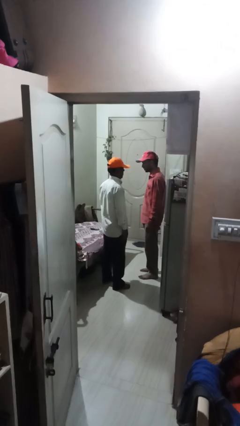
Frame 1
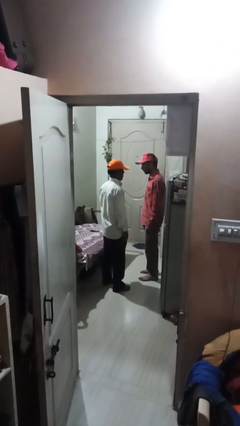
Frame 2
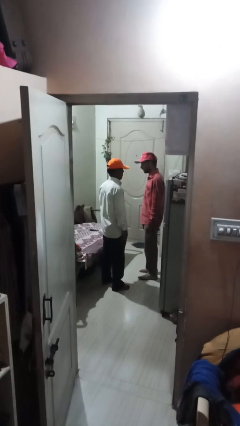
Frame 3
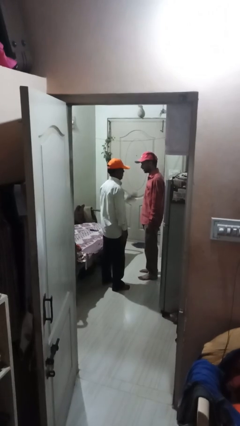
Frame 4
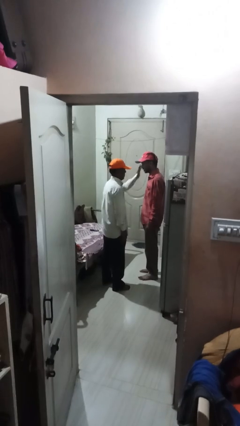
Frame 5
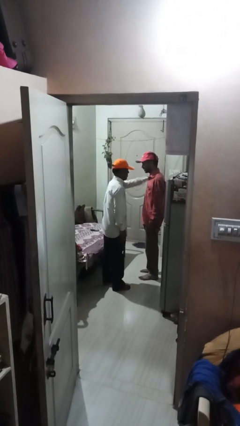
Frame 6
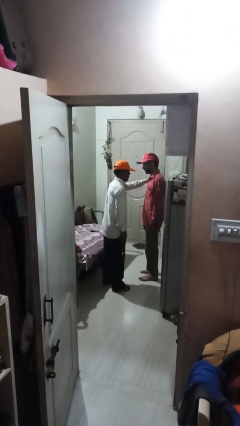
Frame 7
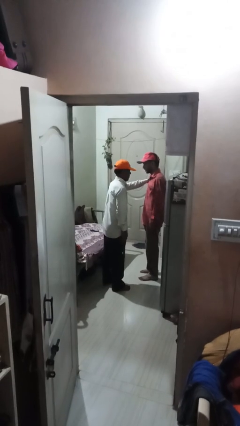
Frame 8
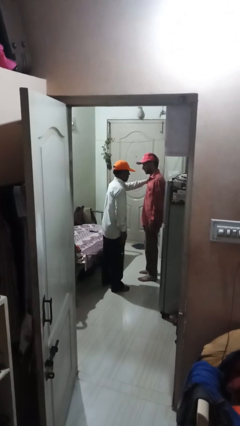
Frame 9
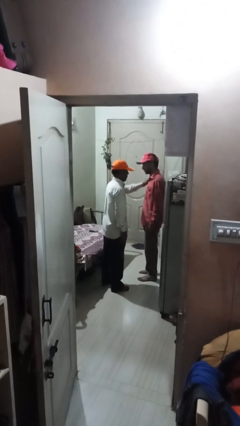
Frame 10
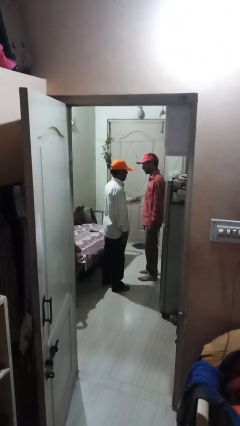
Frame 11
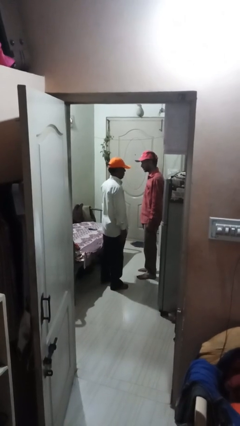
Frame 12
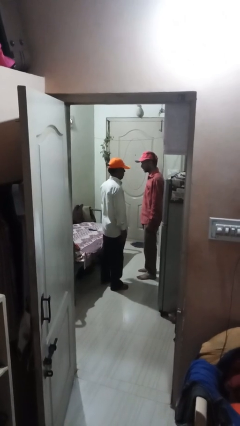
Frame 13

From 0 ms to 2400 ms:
person pounds shoulders of person

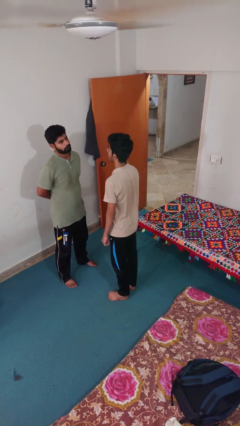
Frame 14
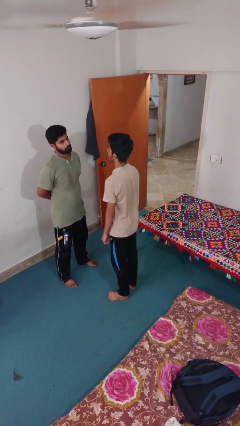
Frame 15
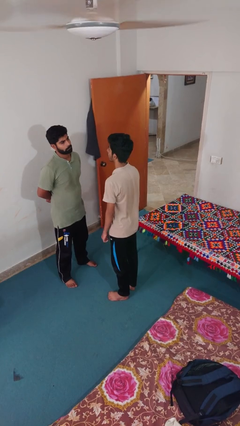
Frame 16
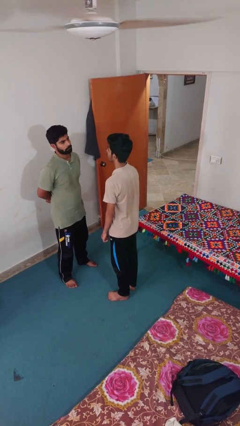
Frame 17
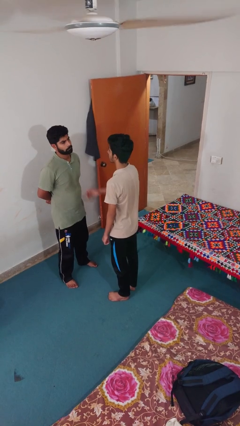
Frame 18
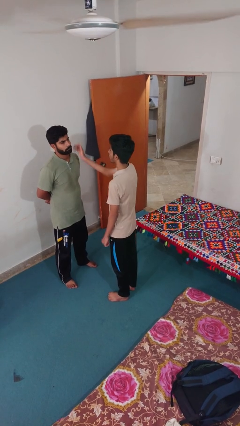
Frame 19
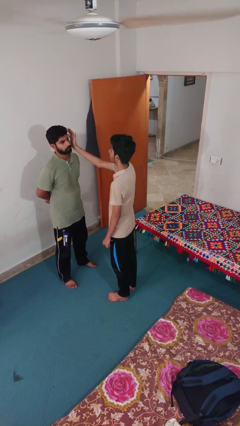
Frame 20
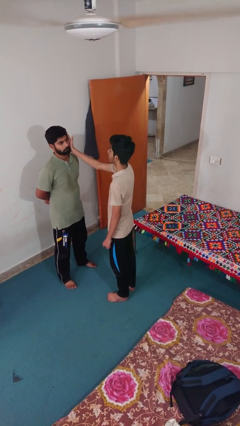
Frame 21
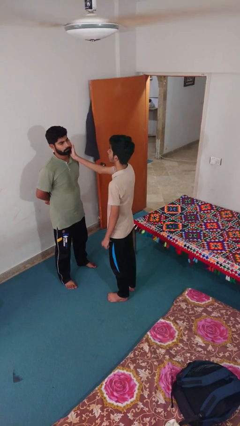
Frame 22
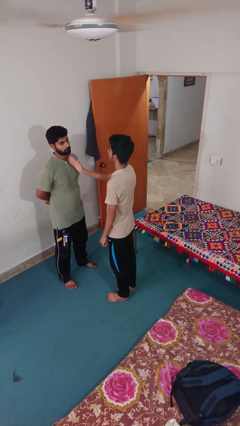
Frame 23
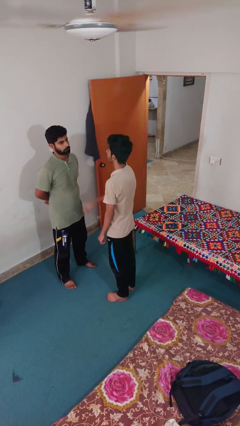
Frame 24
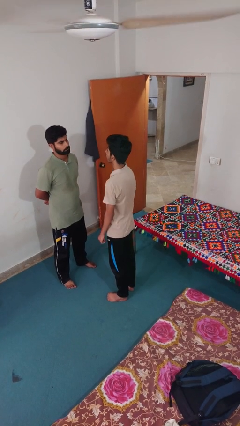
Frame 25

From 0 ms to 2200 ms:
person touches face of person

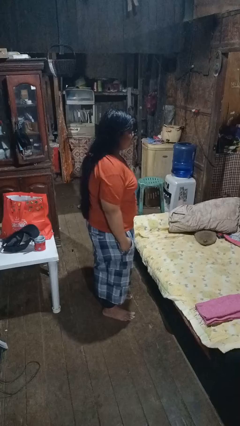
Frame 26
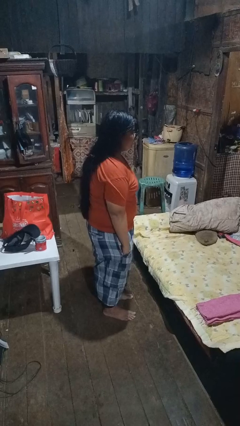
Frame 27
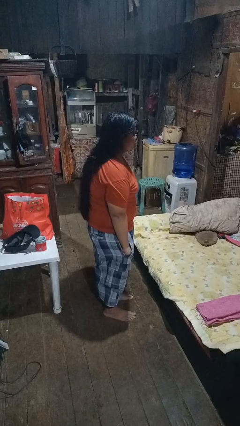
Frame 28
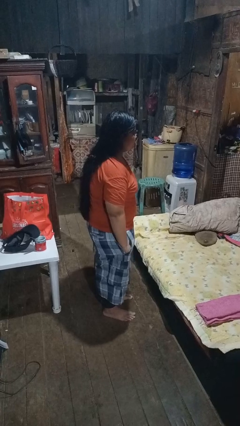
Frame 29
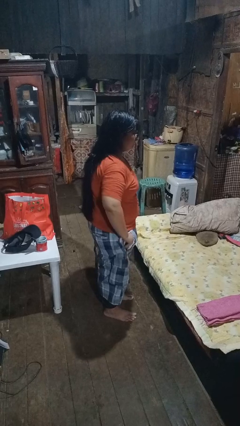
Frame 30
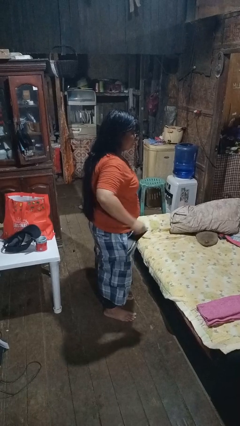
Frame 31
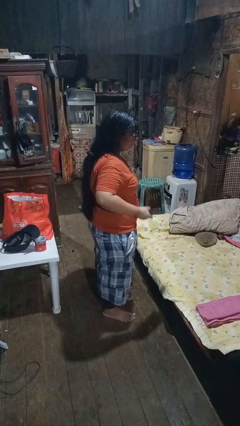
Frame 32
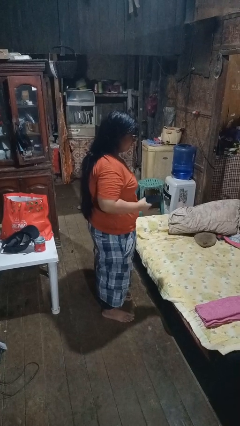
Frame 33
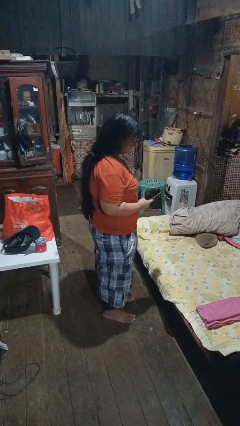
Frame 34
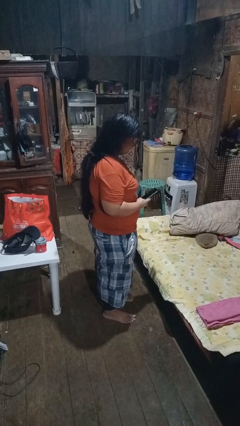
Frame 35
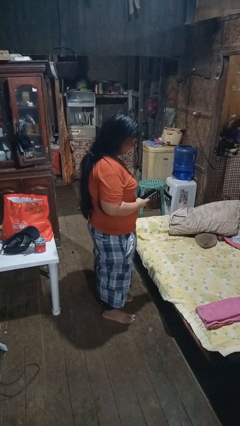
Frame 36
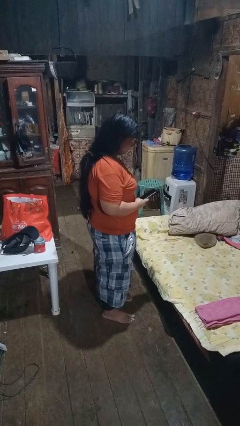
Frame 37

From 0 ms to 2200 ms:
person takes phone from pocket

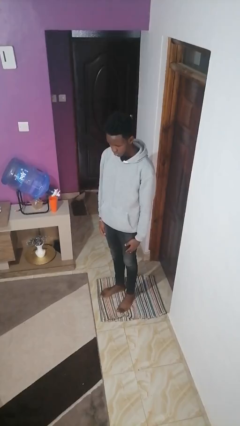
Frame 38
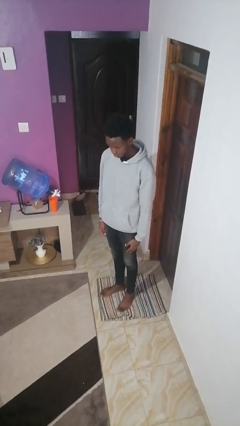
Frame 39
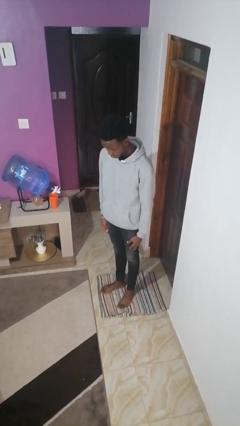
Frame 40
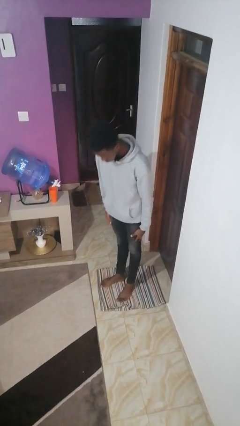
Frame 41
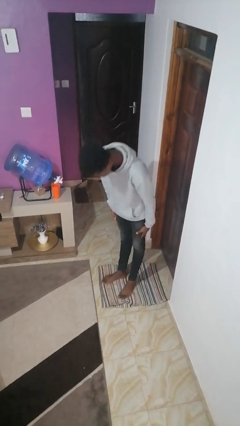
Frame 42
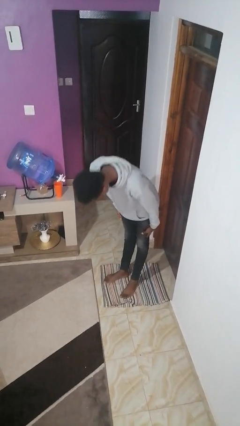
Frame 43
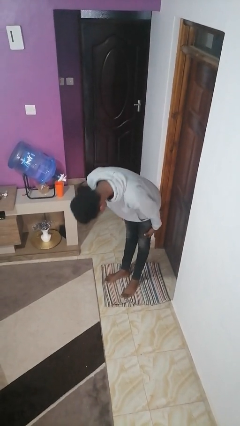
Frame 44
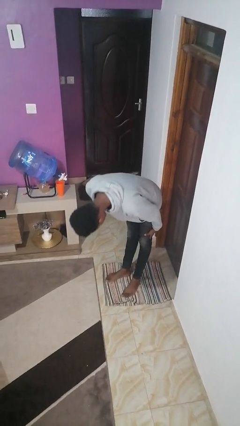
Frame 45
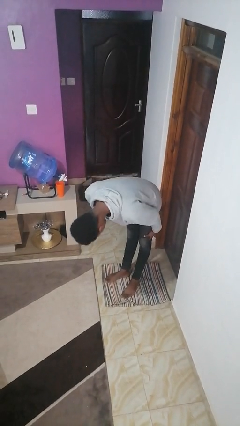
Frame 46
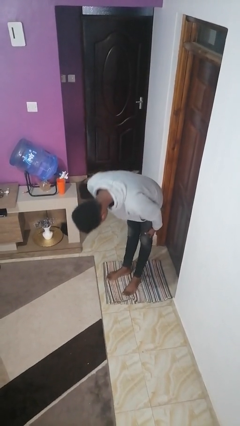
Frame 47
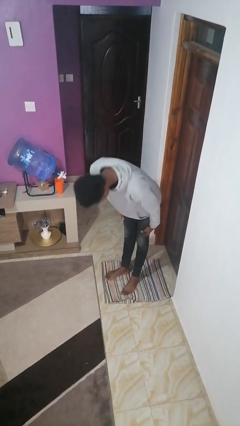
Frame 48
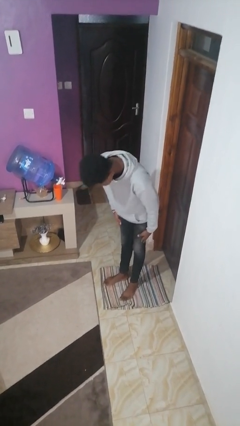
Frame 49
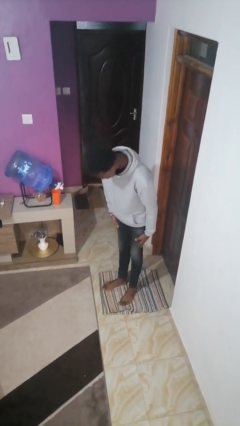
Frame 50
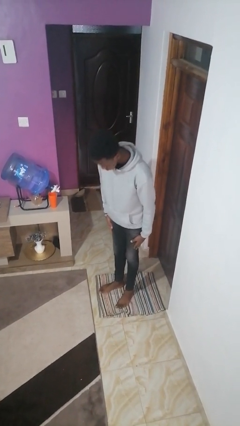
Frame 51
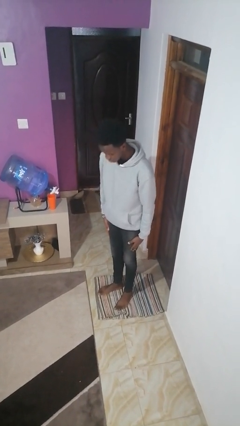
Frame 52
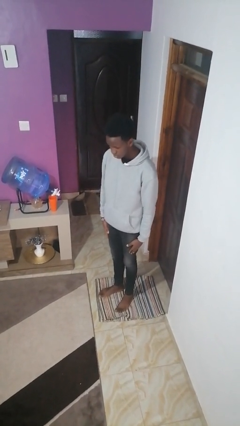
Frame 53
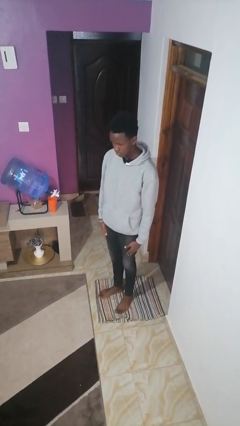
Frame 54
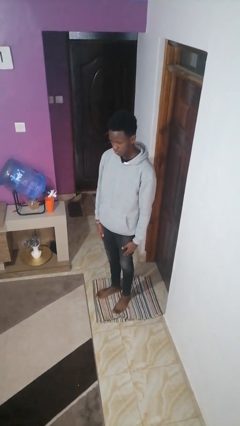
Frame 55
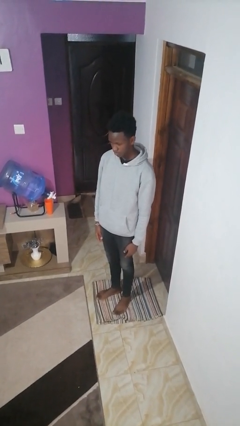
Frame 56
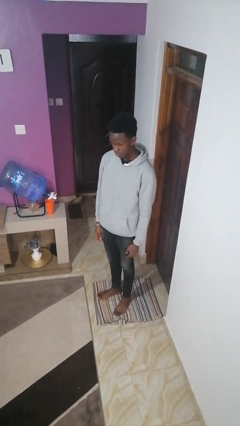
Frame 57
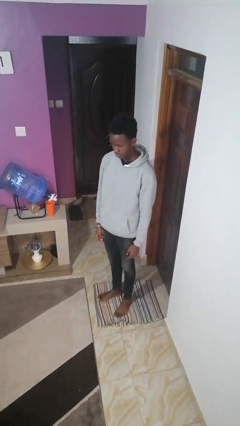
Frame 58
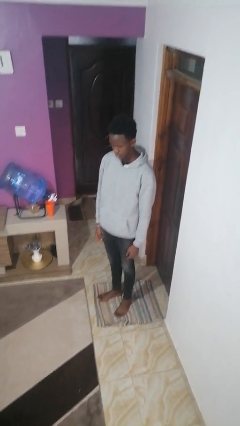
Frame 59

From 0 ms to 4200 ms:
person bows

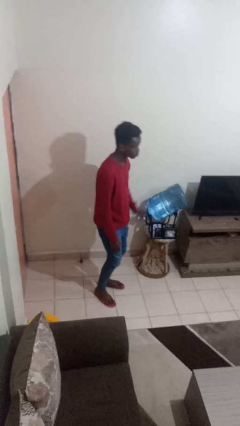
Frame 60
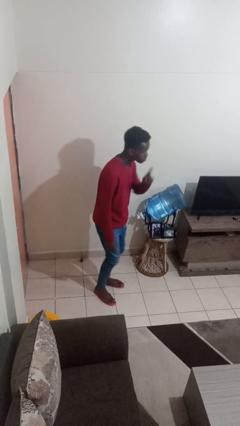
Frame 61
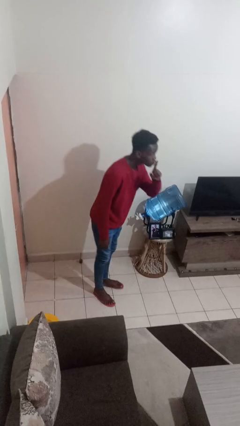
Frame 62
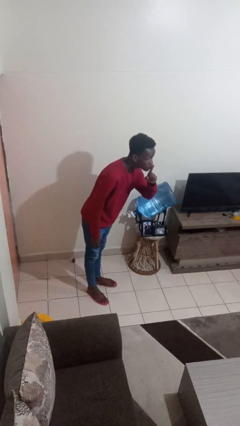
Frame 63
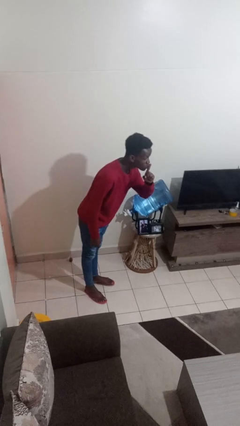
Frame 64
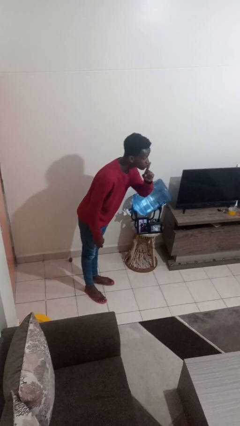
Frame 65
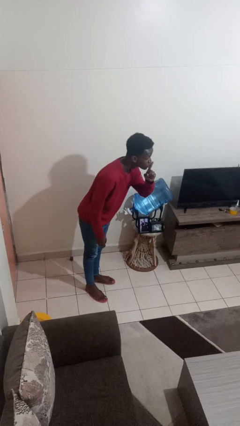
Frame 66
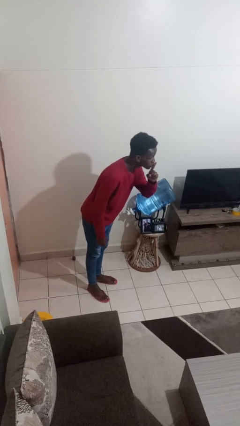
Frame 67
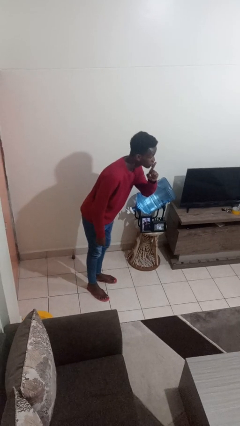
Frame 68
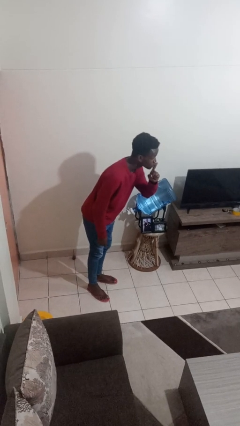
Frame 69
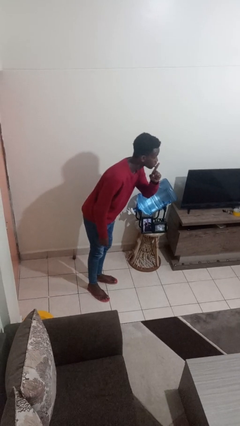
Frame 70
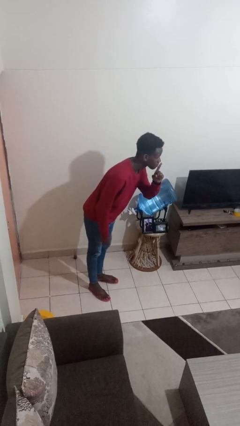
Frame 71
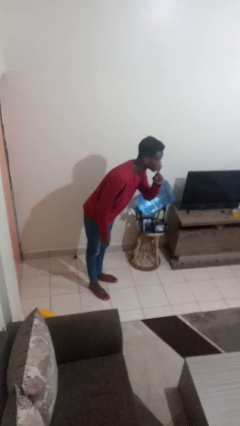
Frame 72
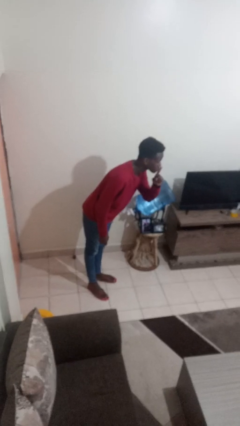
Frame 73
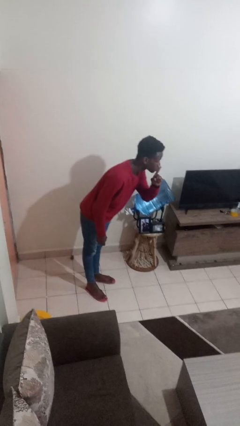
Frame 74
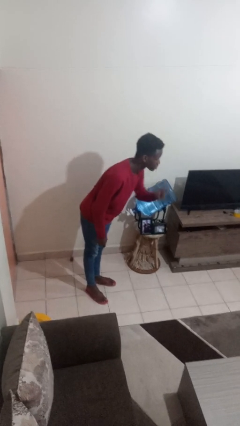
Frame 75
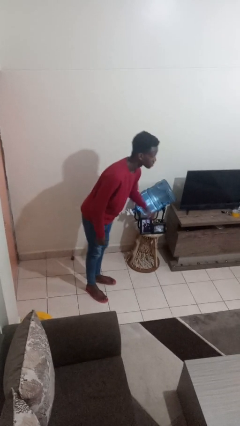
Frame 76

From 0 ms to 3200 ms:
person gestures be quiet

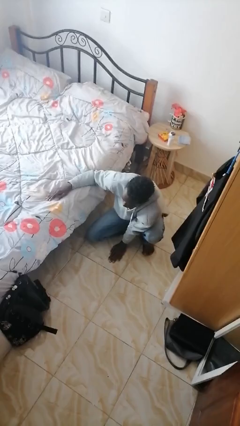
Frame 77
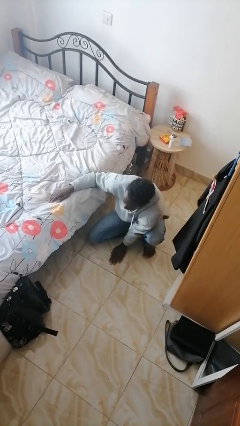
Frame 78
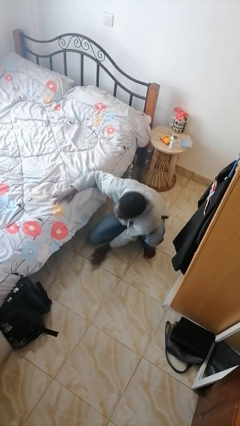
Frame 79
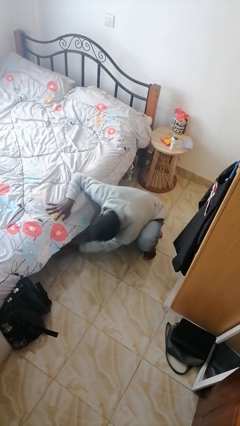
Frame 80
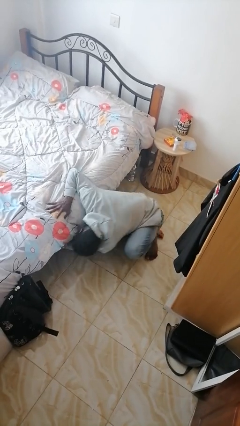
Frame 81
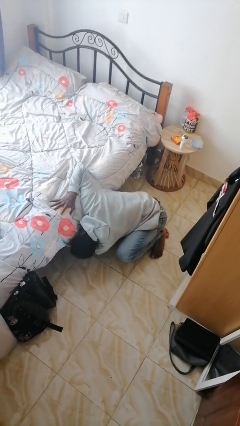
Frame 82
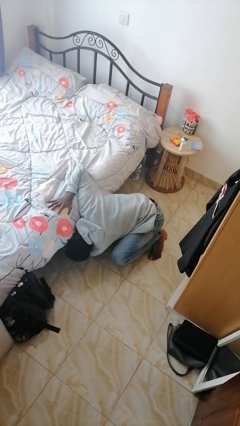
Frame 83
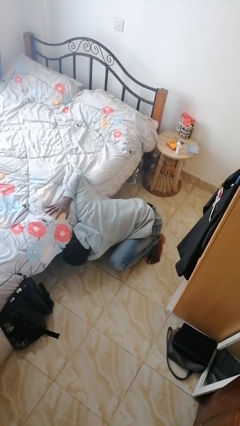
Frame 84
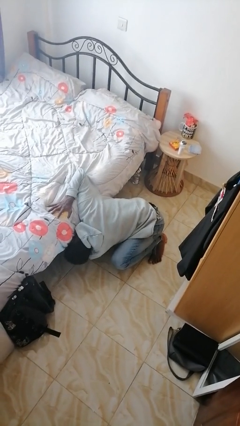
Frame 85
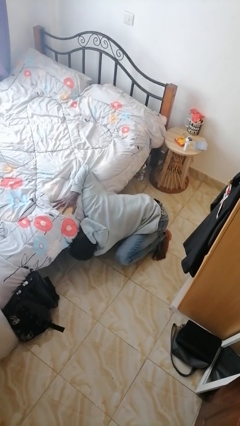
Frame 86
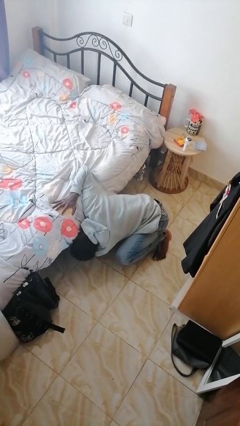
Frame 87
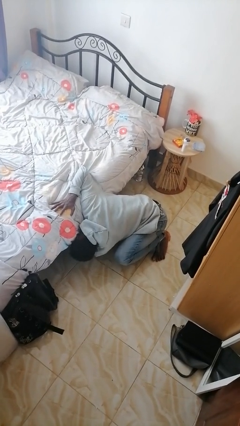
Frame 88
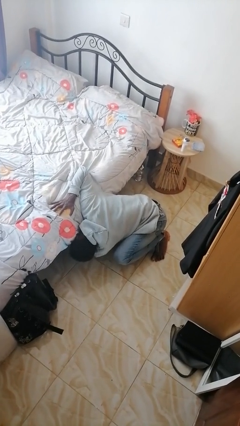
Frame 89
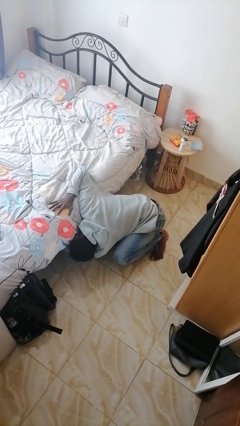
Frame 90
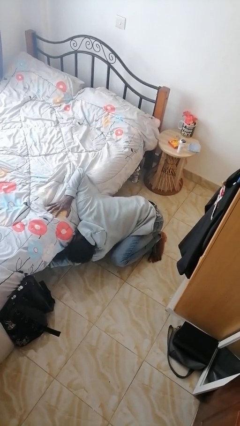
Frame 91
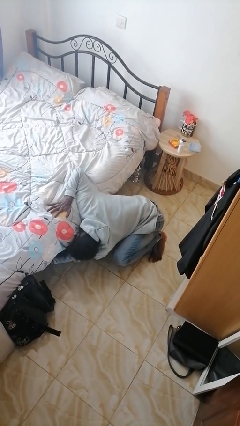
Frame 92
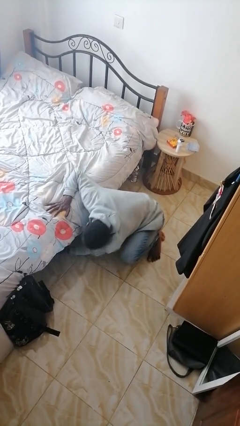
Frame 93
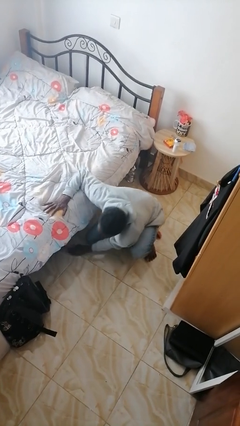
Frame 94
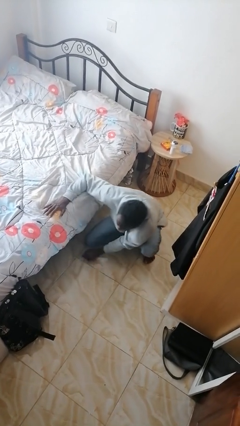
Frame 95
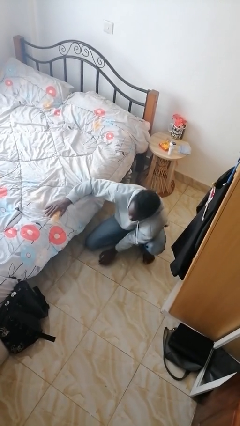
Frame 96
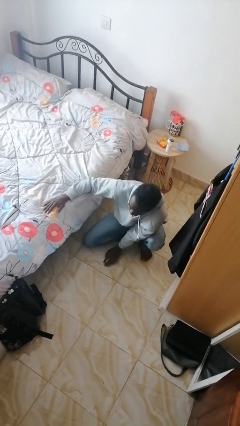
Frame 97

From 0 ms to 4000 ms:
person searches under bed
